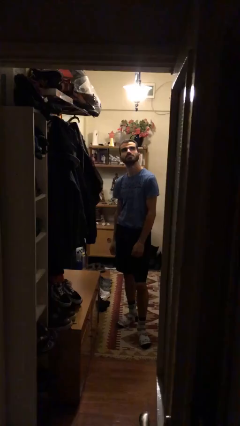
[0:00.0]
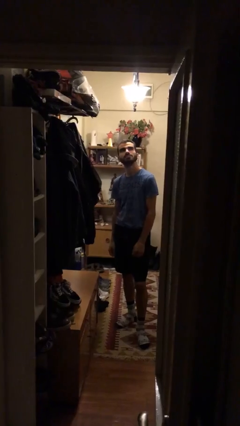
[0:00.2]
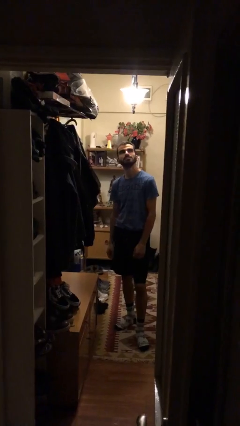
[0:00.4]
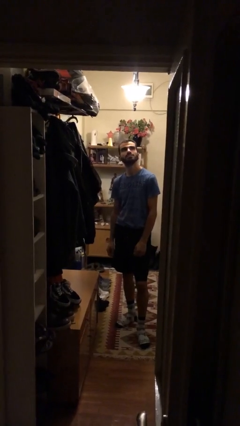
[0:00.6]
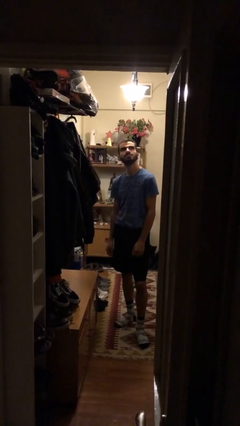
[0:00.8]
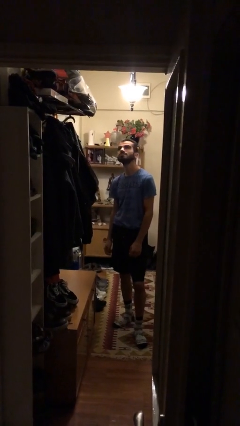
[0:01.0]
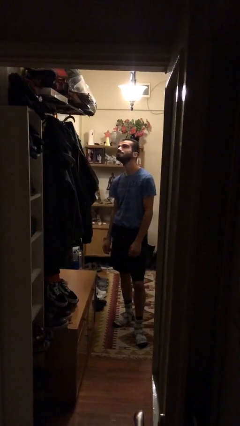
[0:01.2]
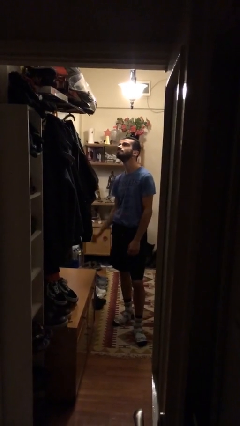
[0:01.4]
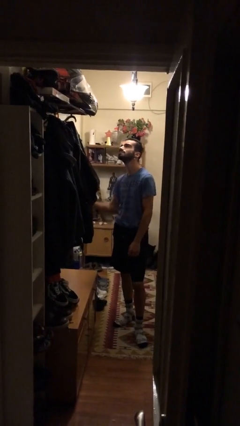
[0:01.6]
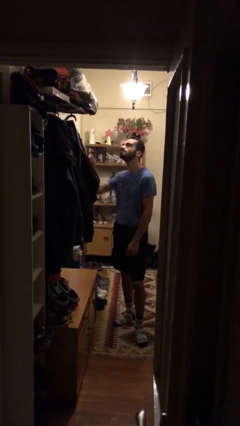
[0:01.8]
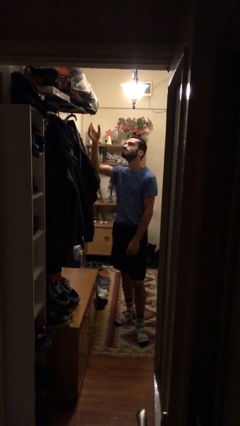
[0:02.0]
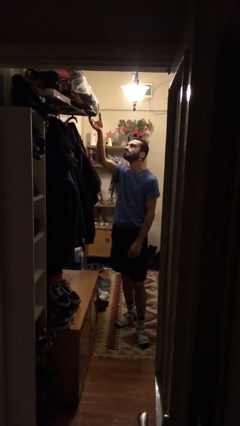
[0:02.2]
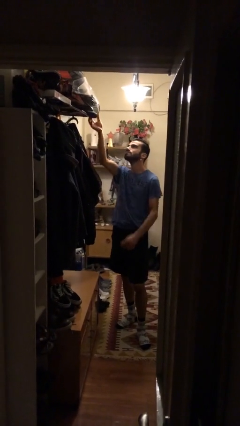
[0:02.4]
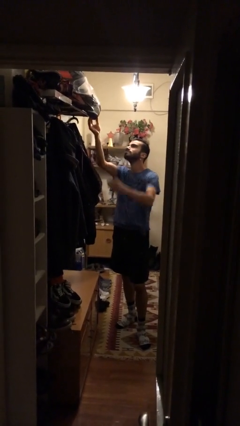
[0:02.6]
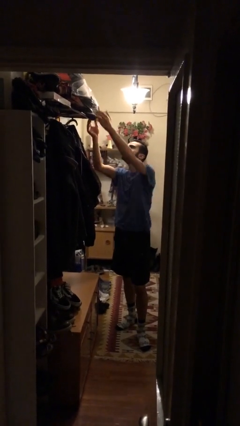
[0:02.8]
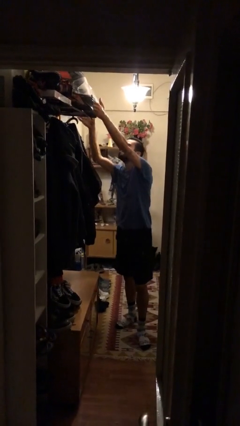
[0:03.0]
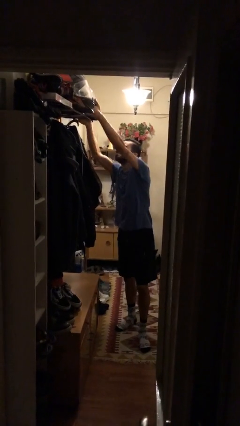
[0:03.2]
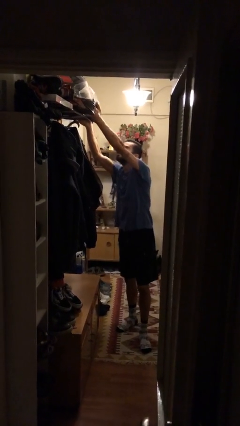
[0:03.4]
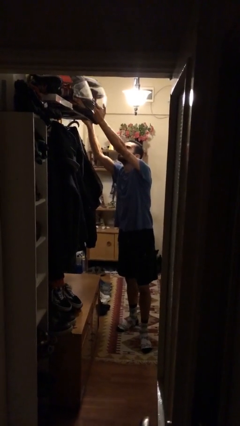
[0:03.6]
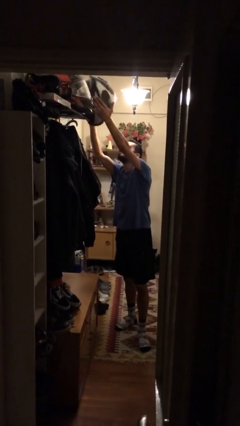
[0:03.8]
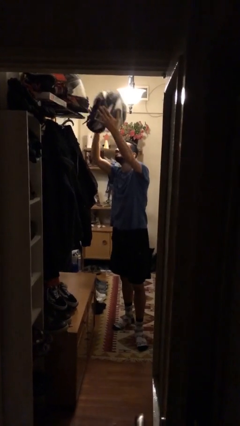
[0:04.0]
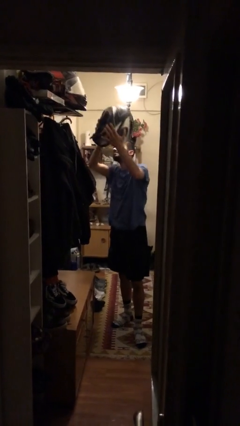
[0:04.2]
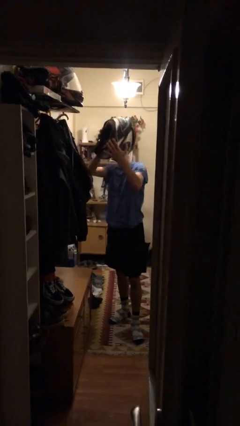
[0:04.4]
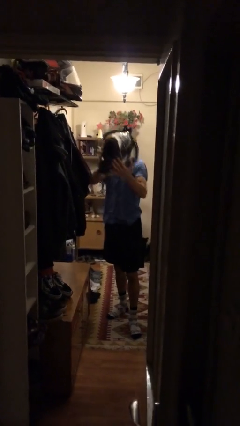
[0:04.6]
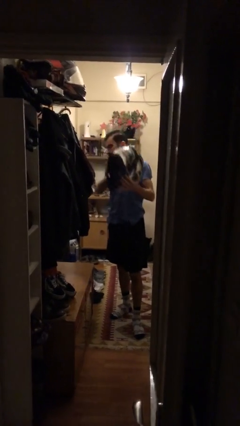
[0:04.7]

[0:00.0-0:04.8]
person picks up object from shelf

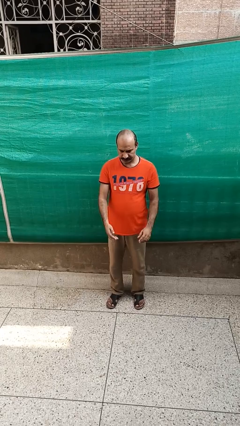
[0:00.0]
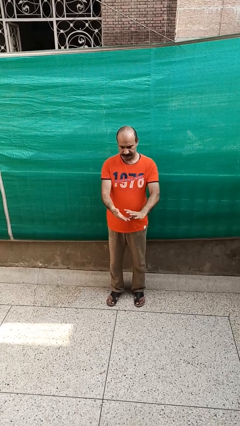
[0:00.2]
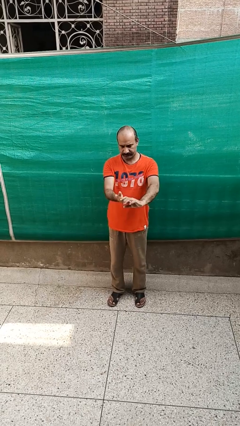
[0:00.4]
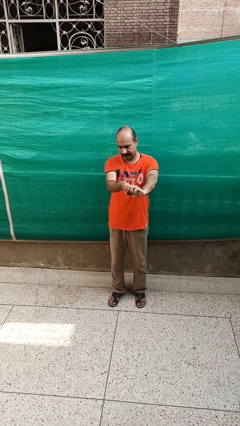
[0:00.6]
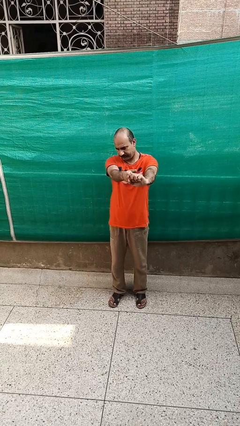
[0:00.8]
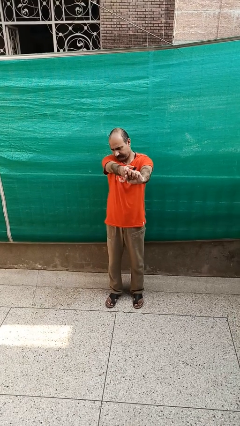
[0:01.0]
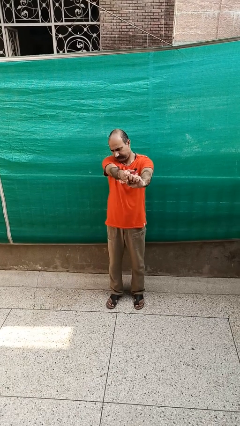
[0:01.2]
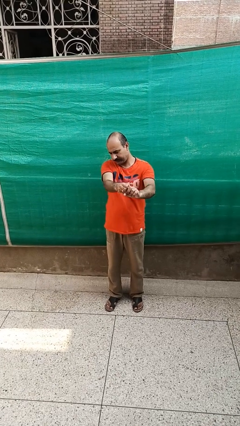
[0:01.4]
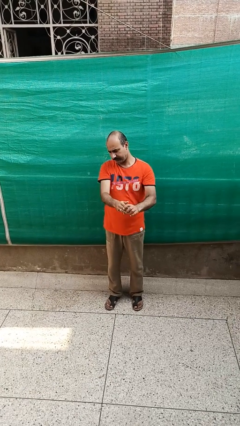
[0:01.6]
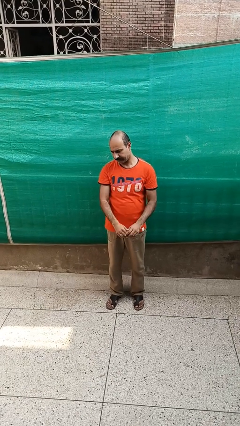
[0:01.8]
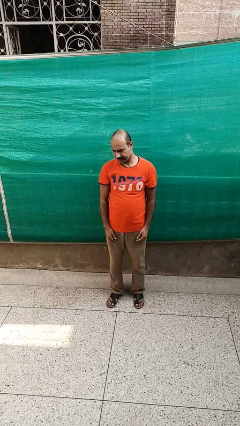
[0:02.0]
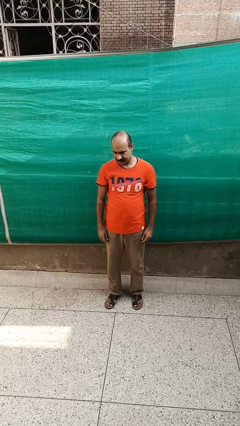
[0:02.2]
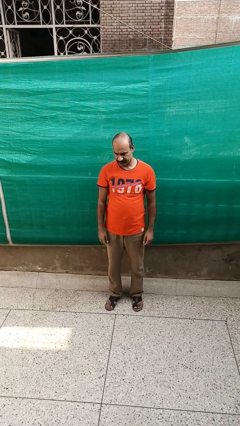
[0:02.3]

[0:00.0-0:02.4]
person cracks knuckles

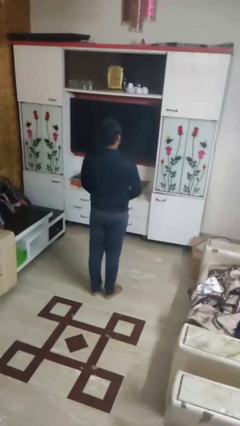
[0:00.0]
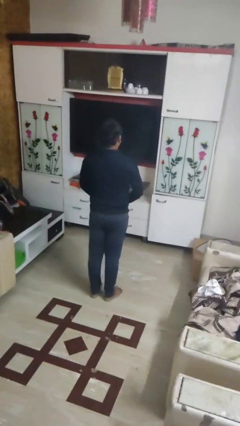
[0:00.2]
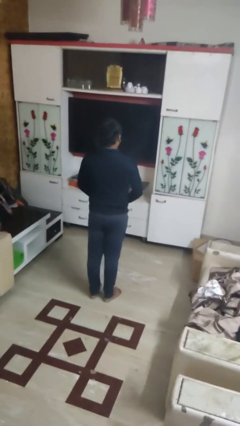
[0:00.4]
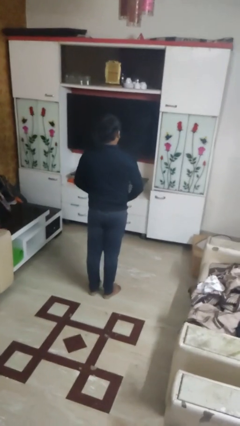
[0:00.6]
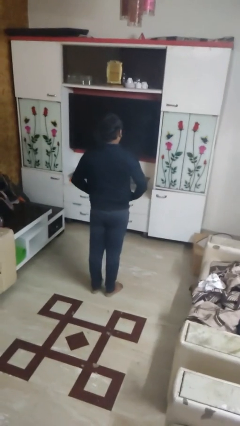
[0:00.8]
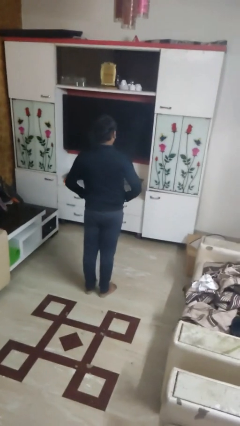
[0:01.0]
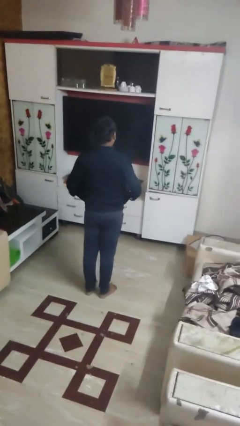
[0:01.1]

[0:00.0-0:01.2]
person unzips jacket

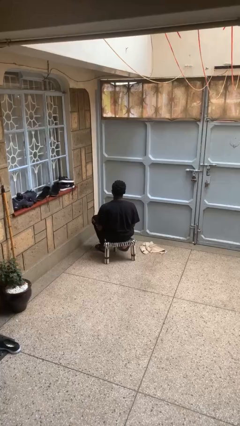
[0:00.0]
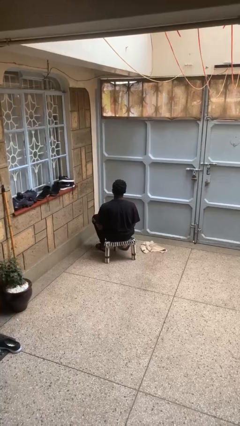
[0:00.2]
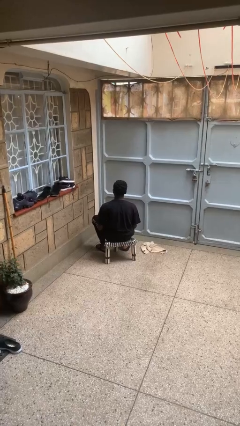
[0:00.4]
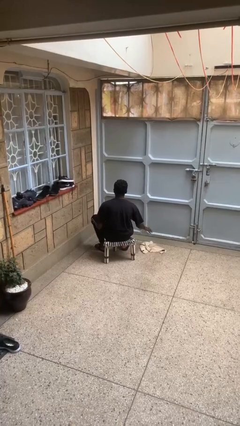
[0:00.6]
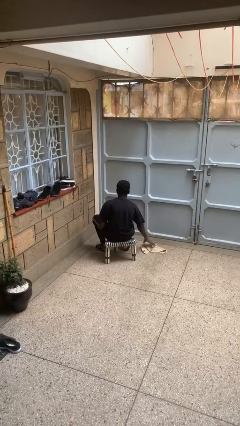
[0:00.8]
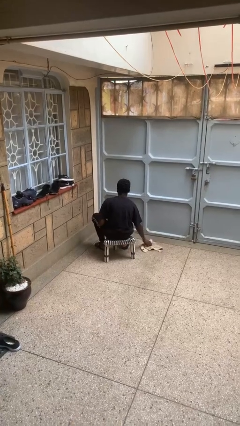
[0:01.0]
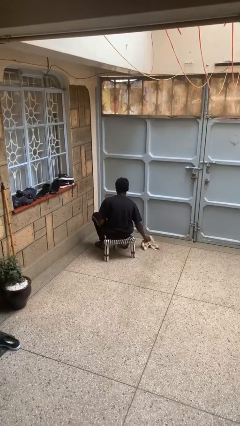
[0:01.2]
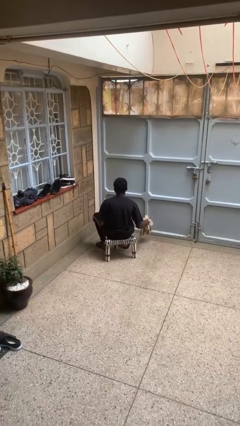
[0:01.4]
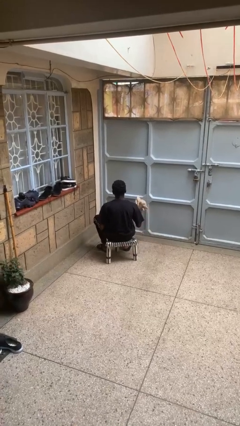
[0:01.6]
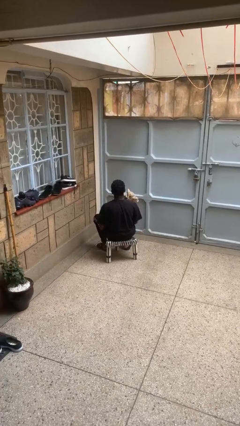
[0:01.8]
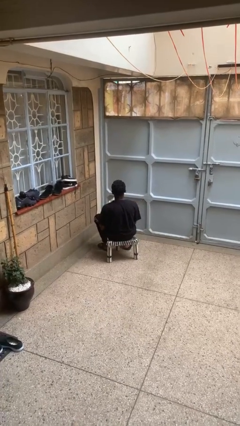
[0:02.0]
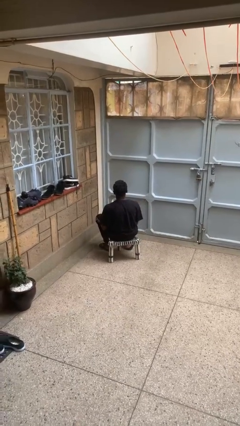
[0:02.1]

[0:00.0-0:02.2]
person picks up object from floor

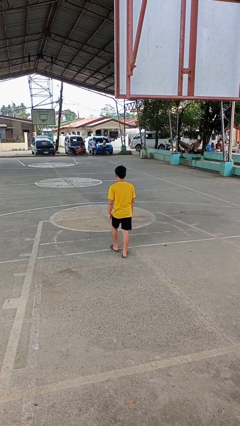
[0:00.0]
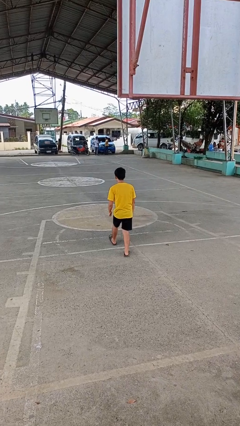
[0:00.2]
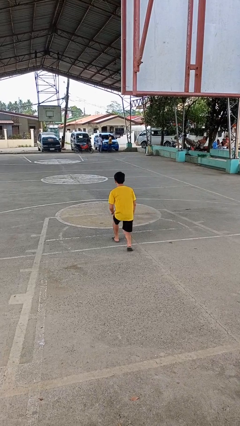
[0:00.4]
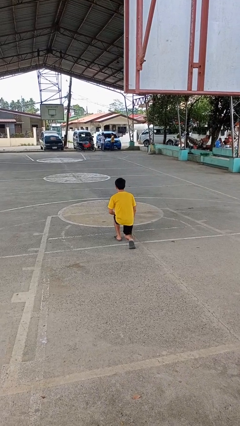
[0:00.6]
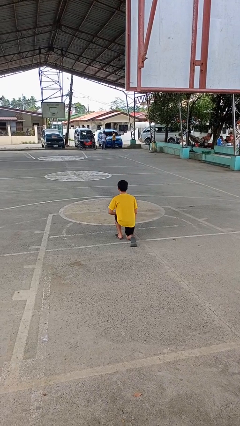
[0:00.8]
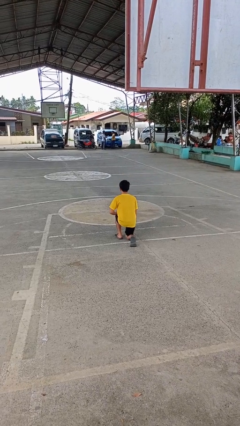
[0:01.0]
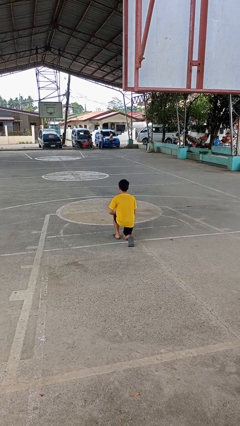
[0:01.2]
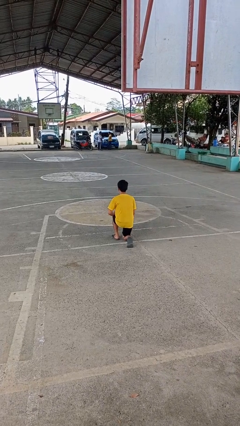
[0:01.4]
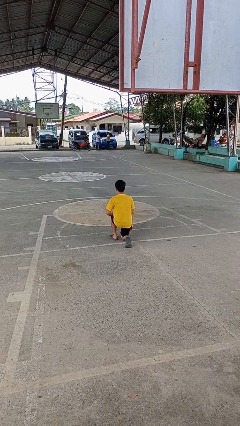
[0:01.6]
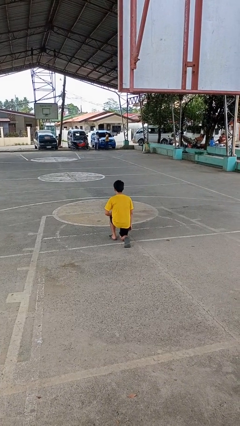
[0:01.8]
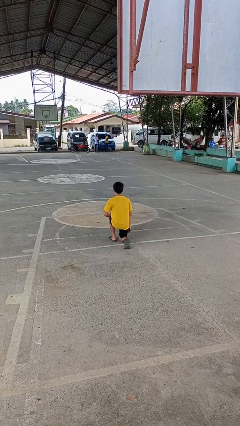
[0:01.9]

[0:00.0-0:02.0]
person kneels

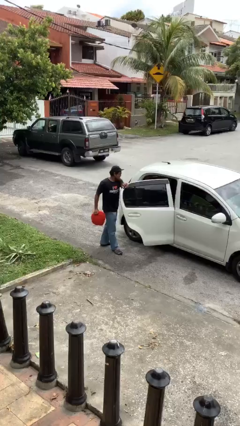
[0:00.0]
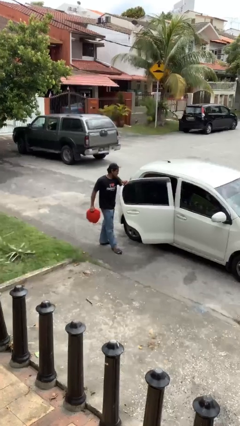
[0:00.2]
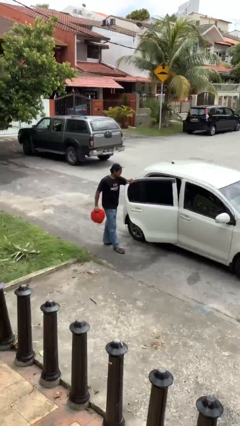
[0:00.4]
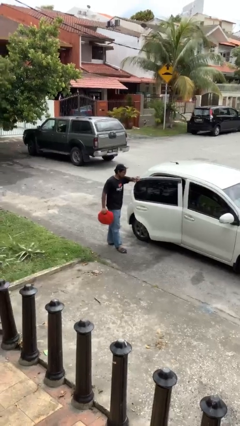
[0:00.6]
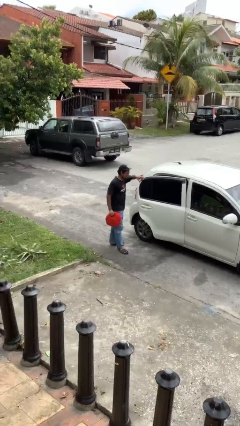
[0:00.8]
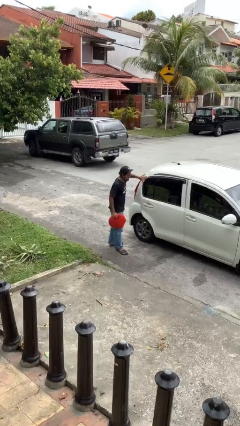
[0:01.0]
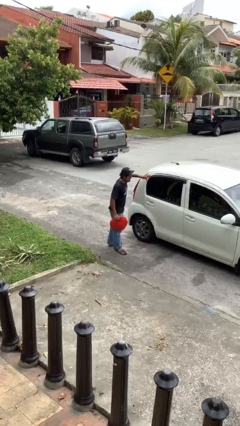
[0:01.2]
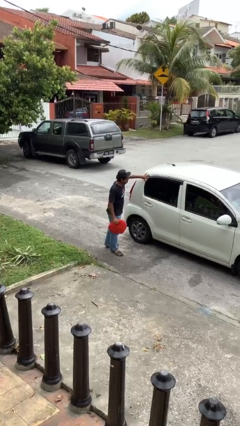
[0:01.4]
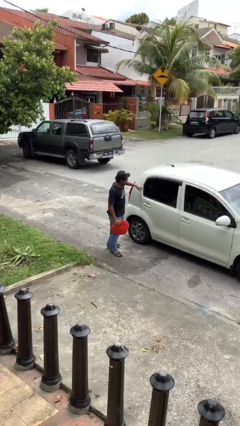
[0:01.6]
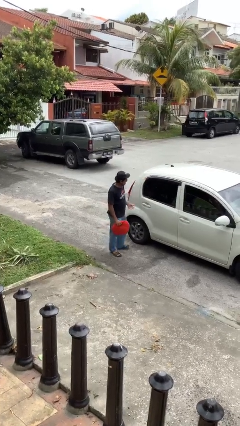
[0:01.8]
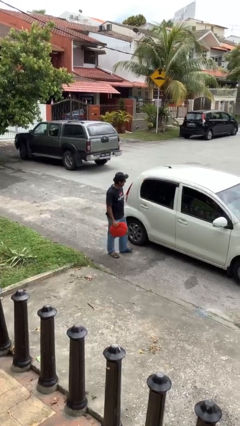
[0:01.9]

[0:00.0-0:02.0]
person closes car door

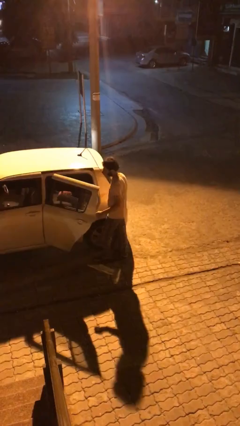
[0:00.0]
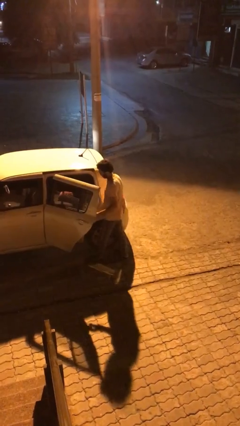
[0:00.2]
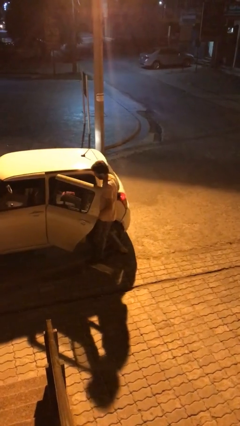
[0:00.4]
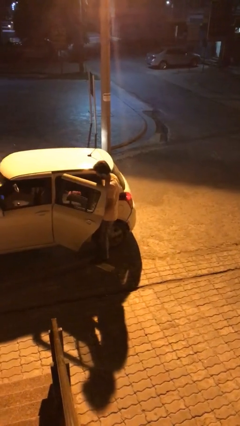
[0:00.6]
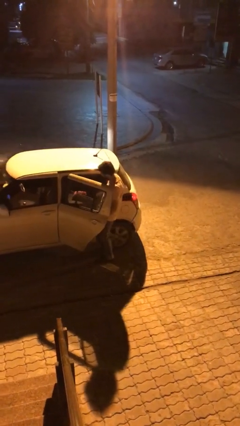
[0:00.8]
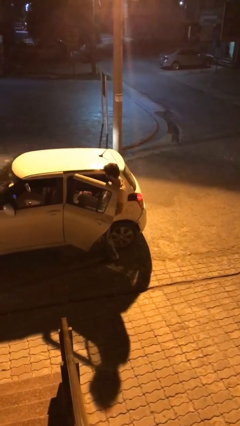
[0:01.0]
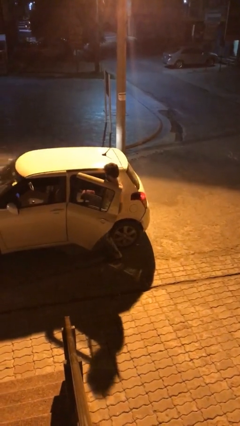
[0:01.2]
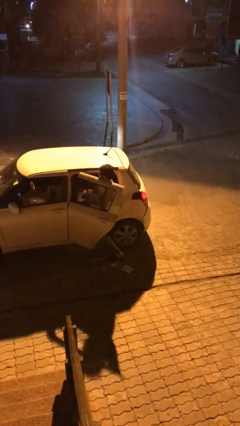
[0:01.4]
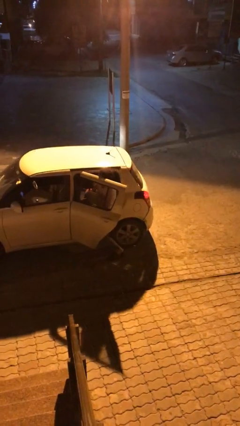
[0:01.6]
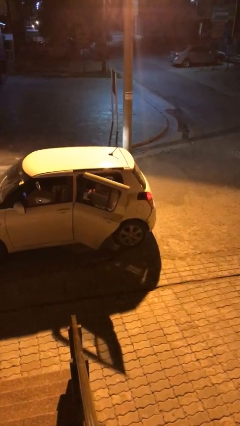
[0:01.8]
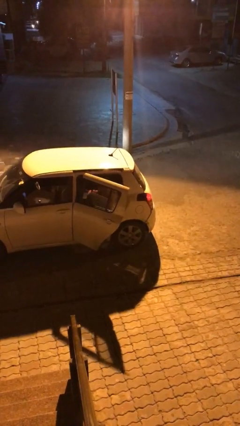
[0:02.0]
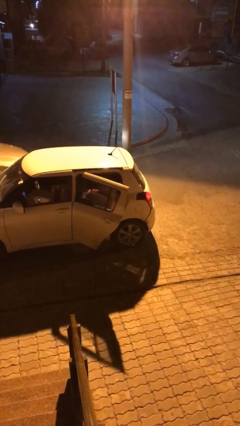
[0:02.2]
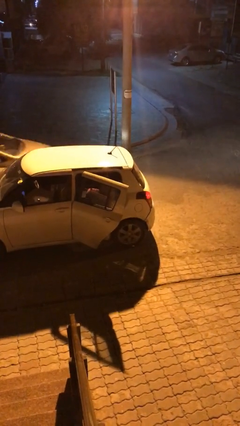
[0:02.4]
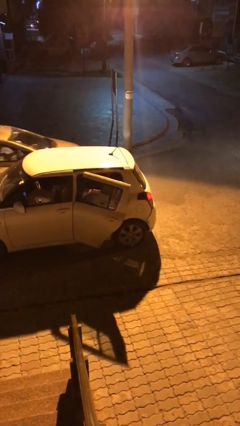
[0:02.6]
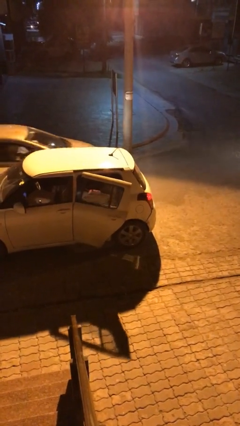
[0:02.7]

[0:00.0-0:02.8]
person enters car
